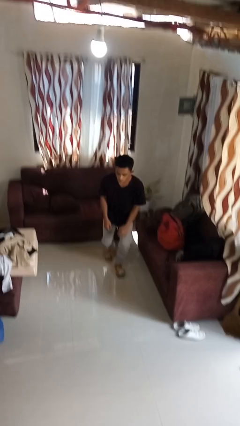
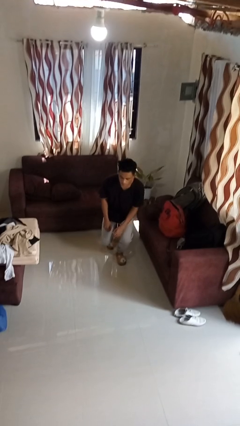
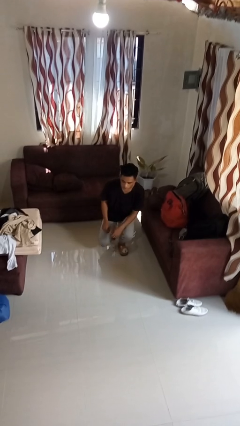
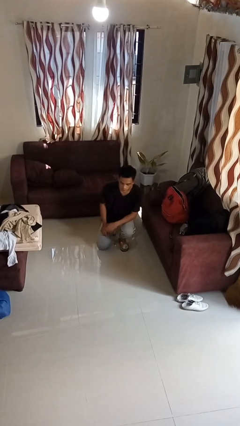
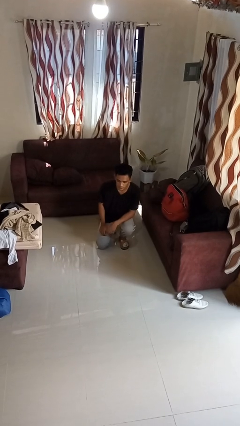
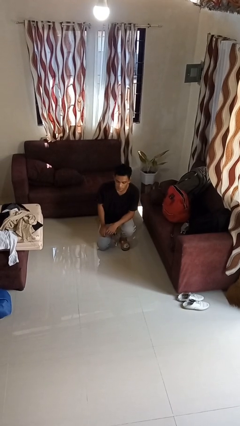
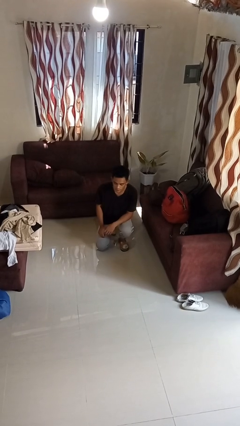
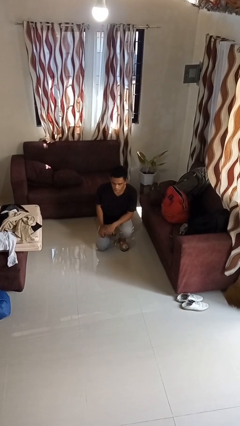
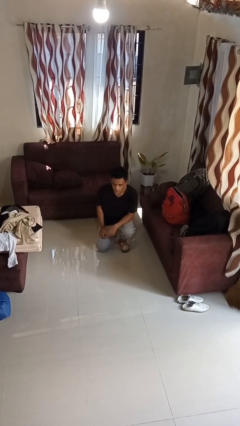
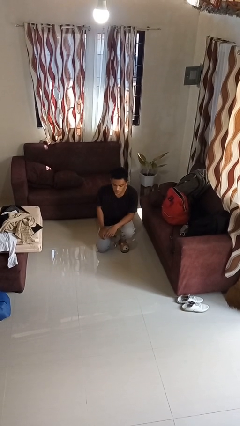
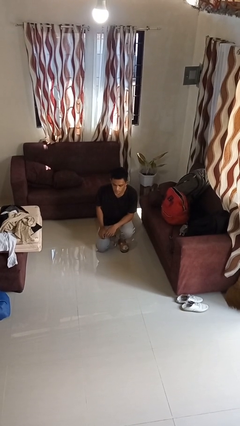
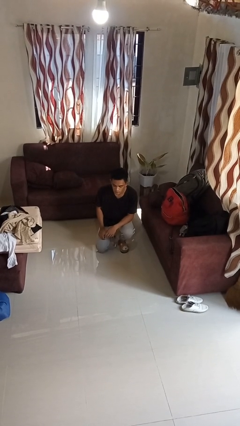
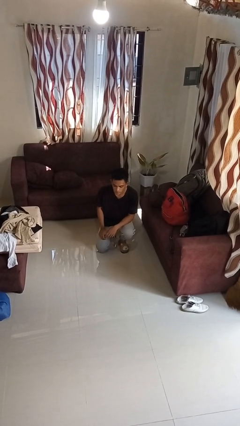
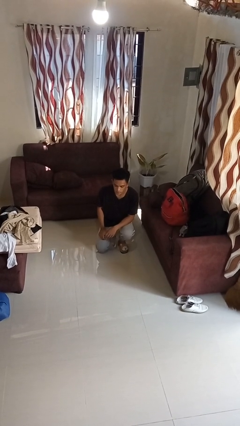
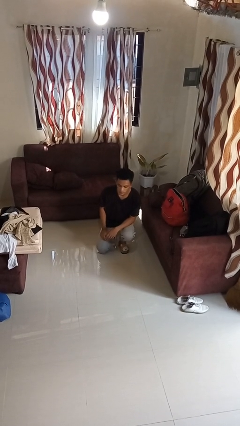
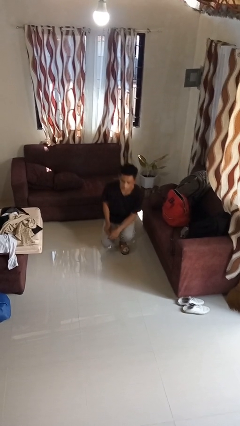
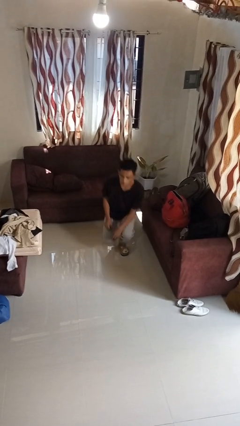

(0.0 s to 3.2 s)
person kneels

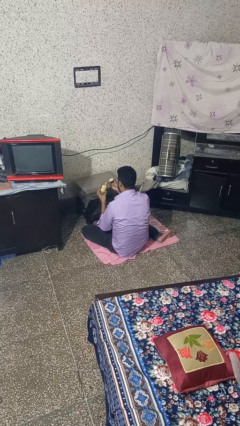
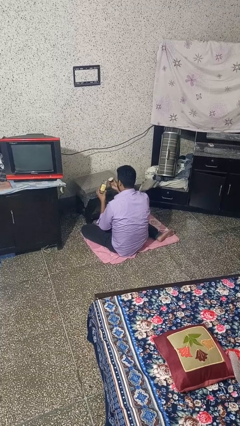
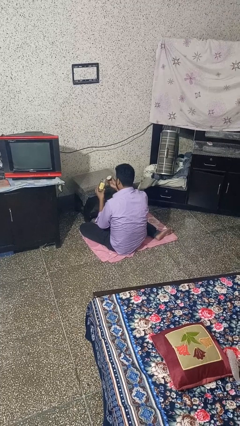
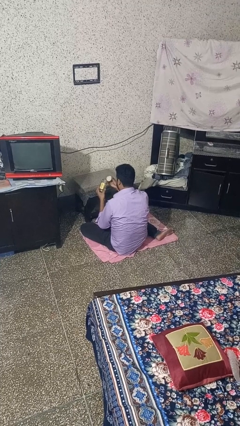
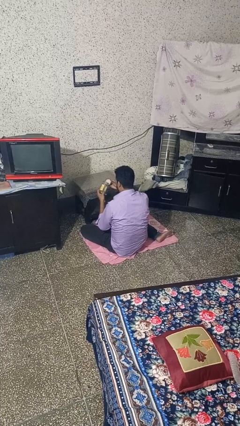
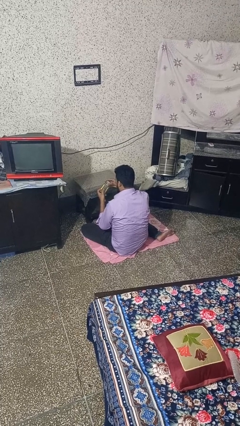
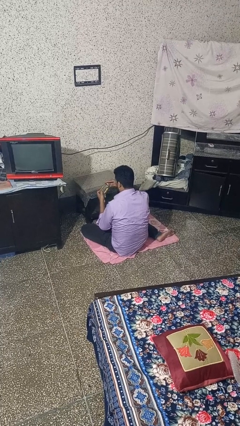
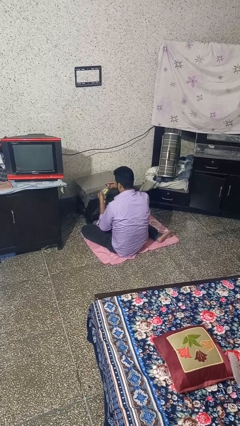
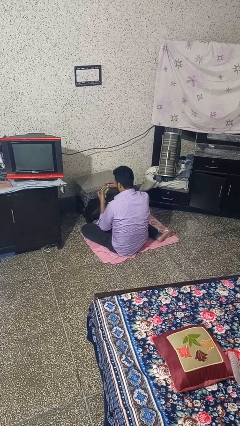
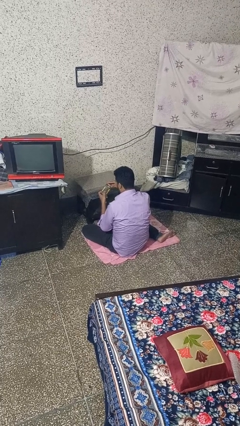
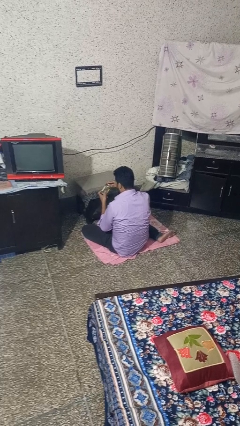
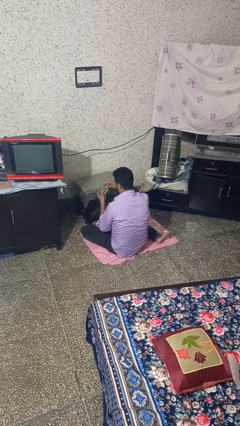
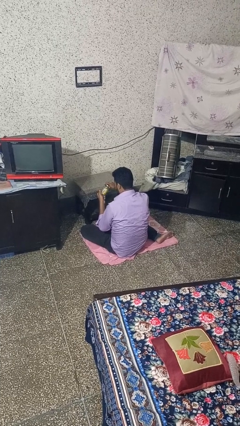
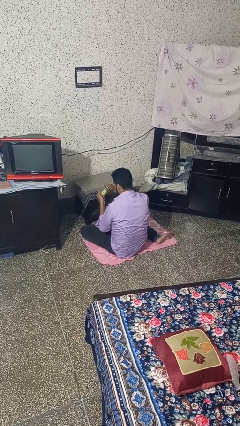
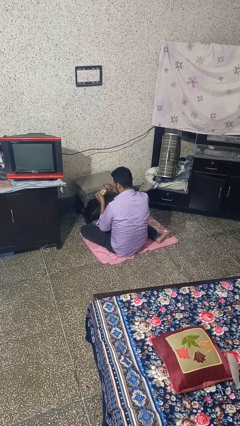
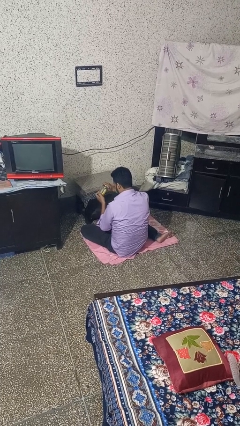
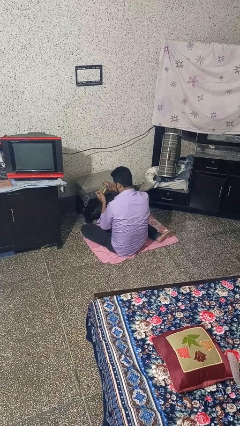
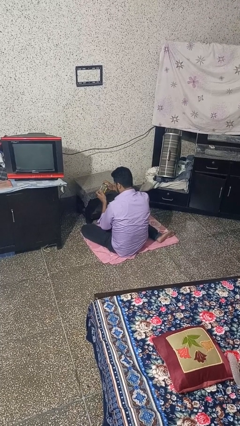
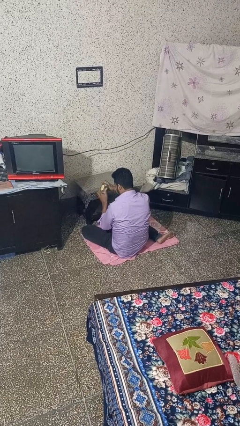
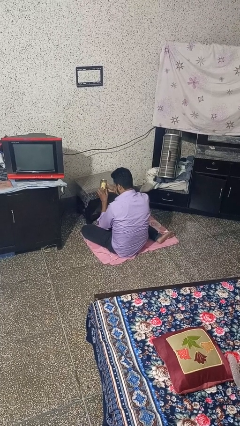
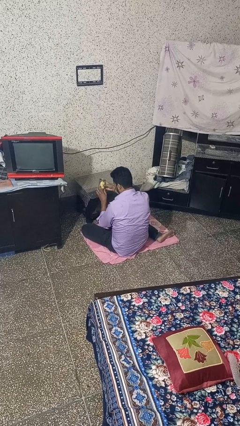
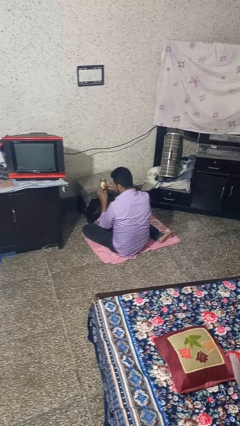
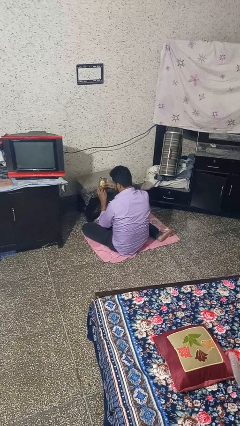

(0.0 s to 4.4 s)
person closes jar

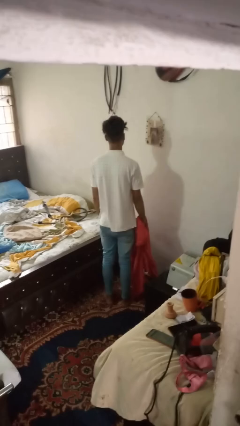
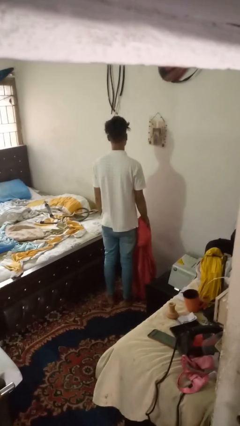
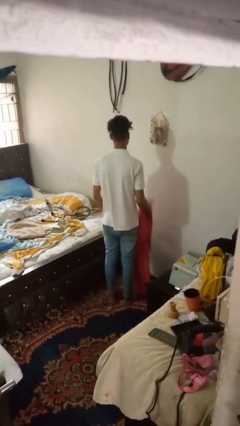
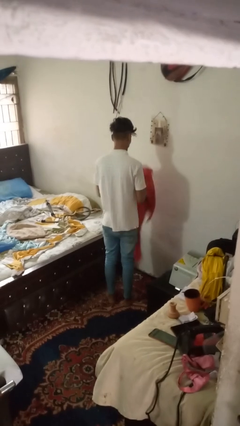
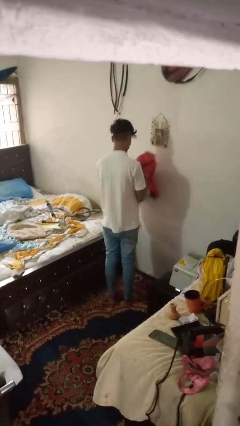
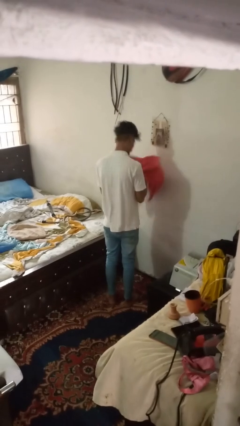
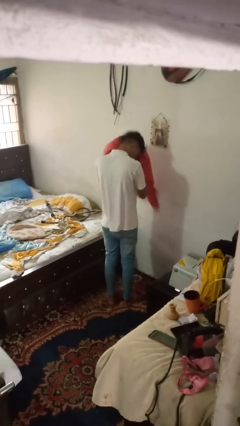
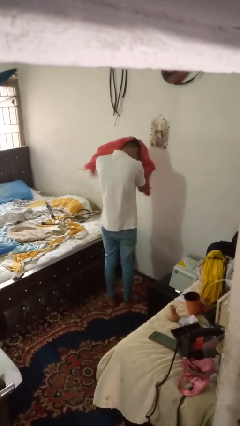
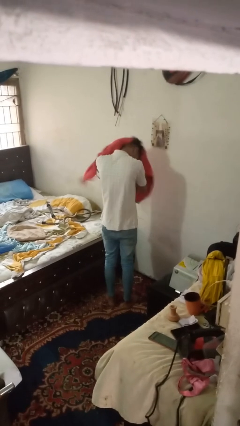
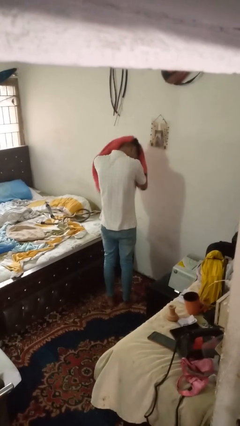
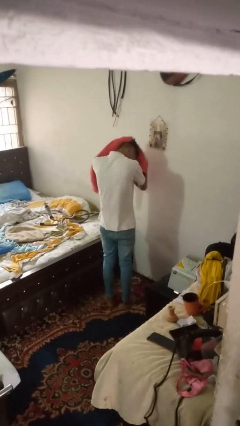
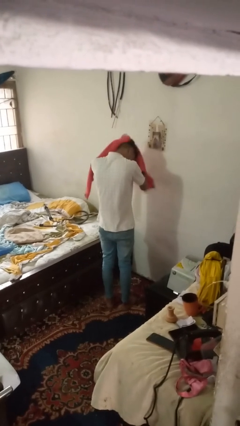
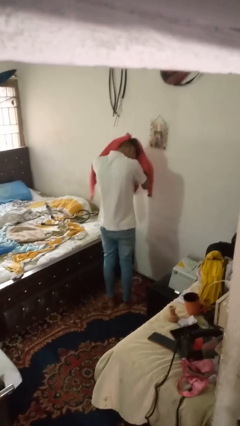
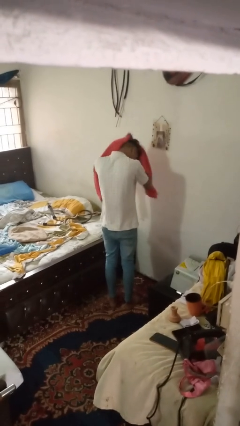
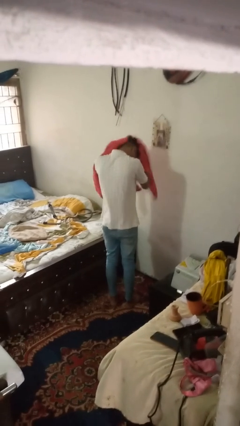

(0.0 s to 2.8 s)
person dries hair with towel

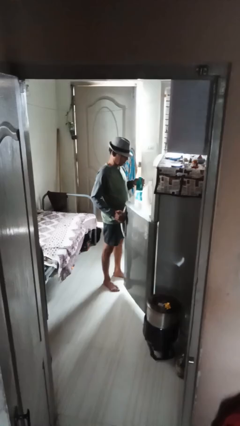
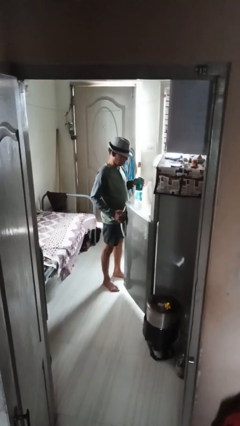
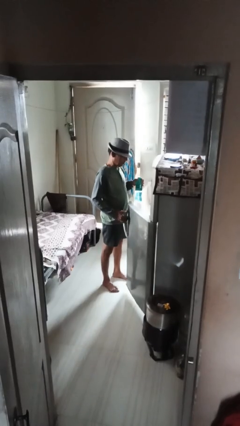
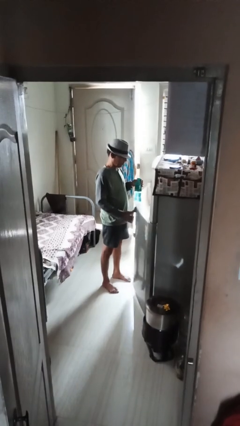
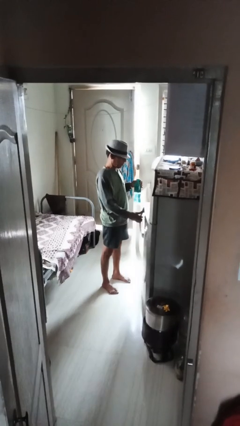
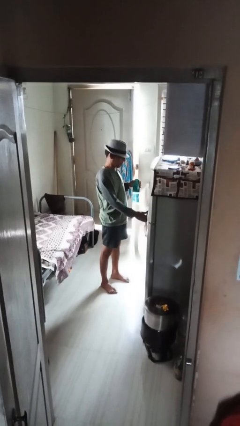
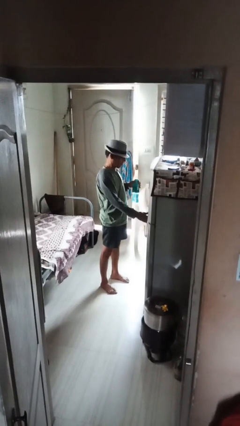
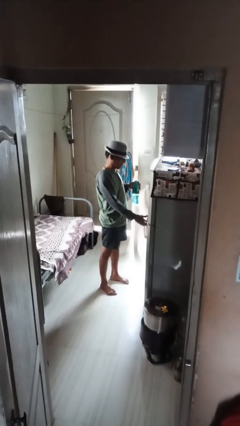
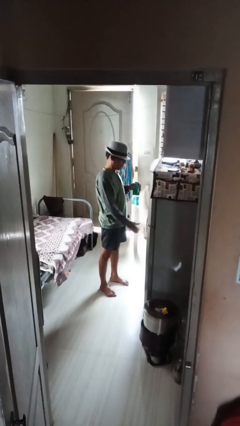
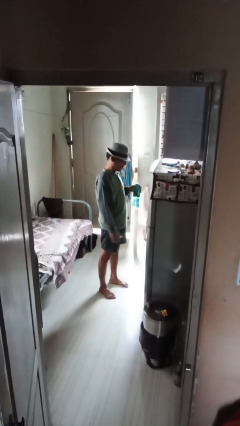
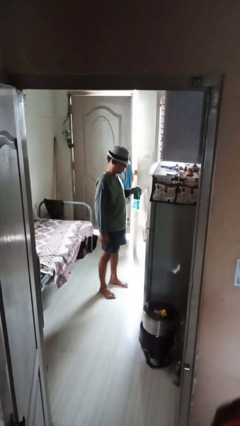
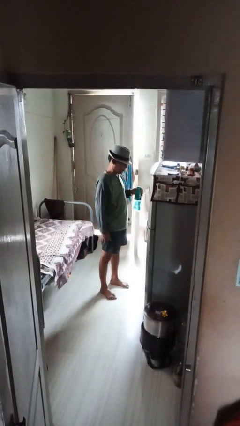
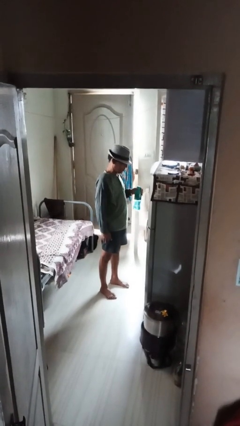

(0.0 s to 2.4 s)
person closes refrigerator

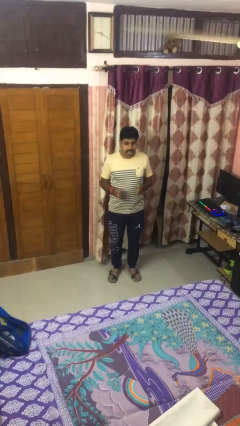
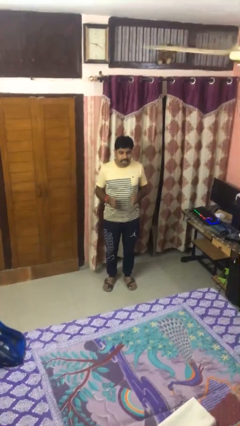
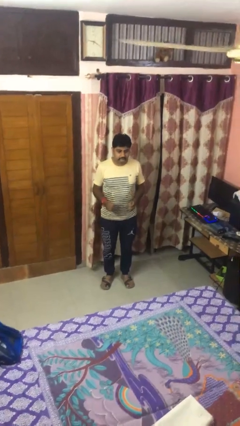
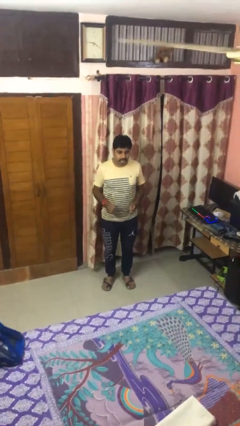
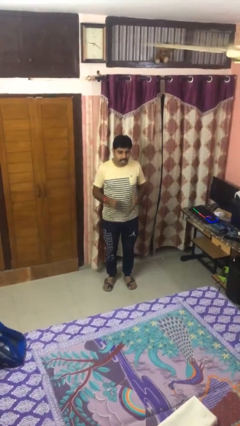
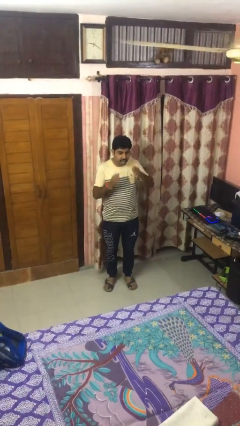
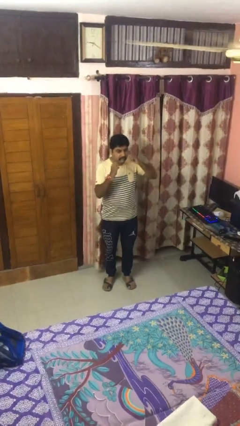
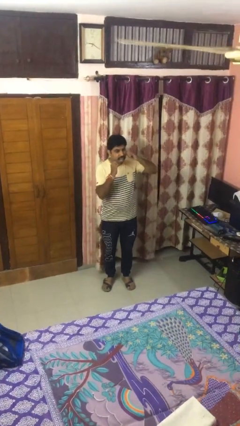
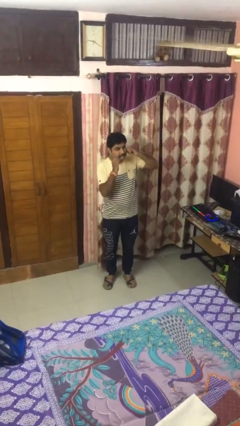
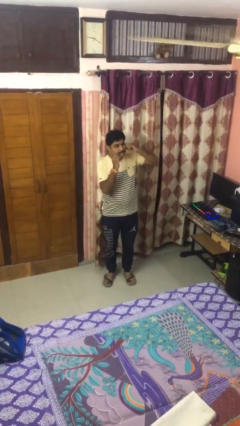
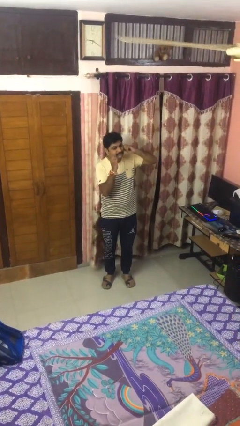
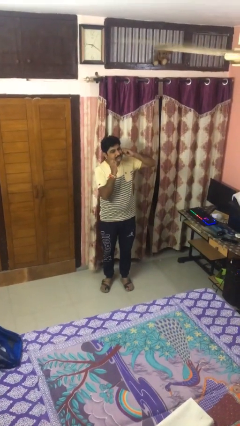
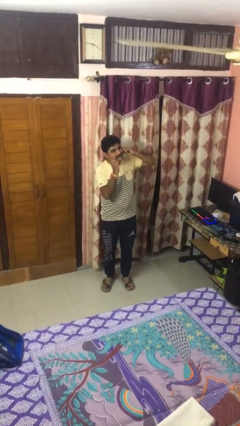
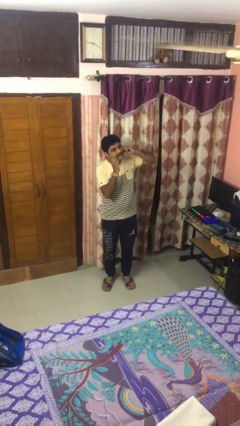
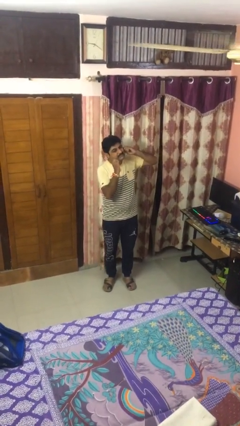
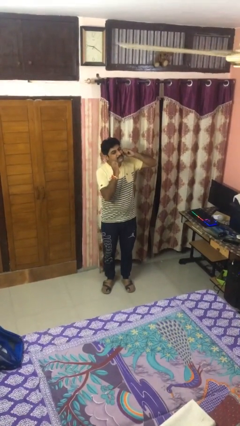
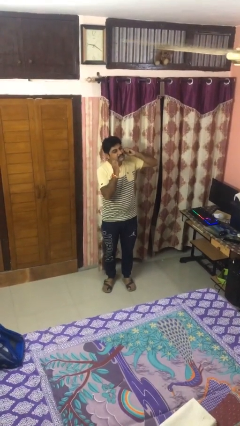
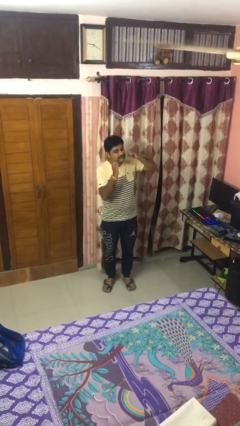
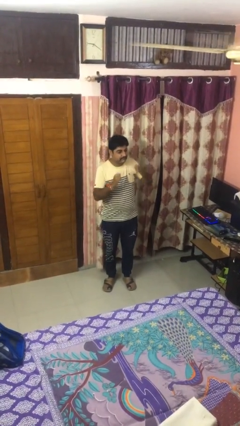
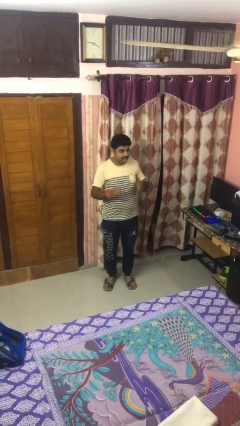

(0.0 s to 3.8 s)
person flosses

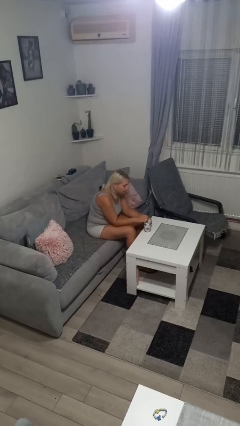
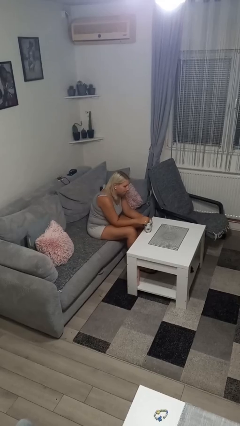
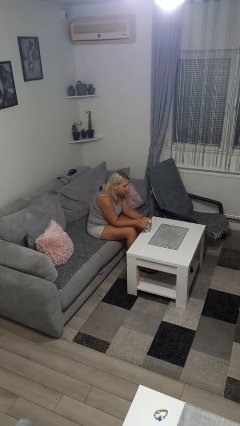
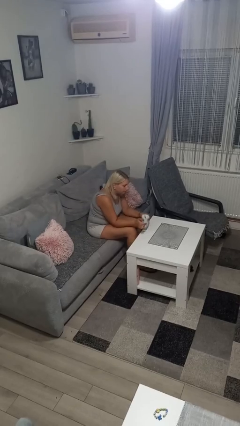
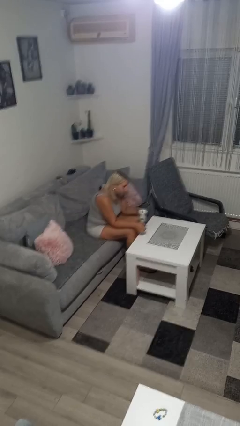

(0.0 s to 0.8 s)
person stirs mug
